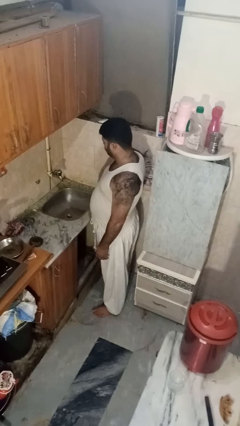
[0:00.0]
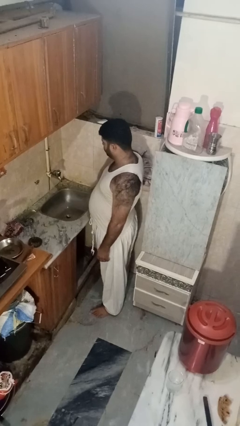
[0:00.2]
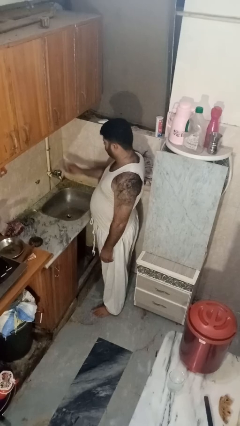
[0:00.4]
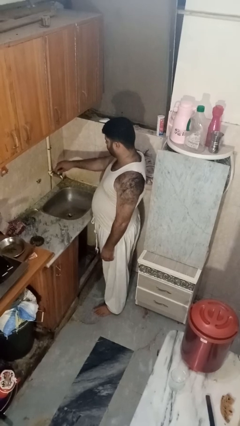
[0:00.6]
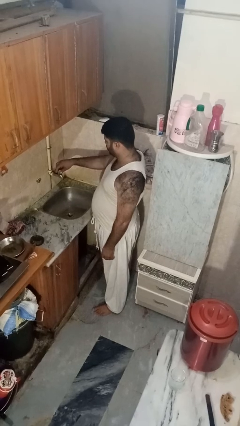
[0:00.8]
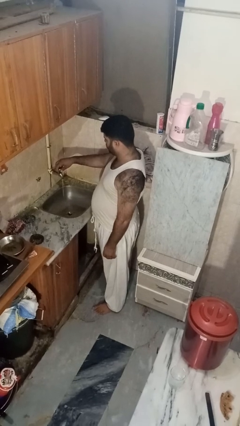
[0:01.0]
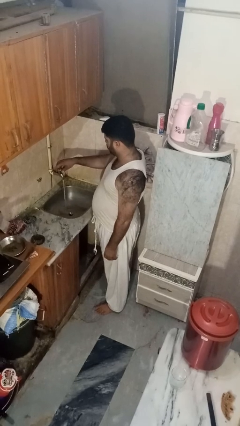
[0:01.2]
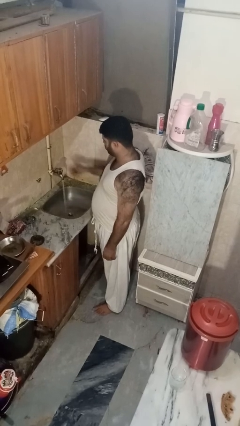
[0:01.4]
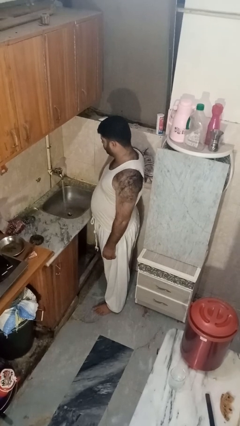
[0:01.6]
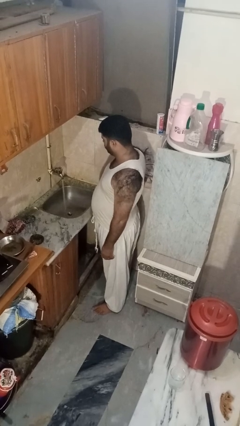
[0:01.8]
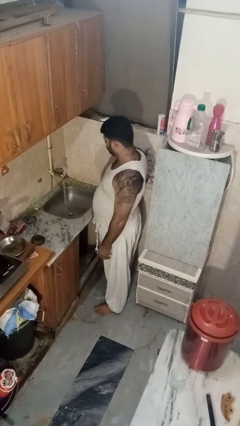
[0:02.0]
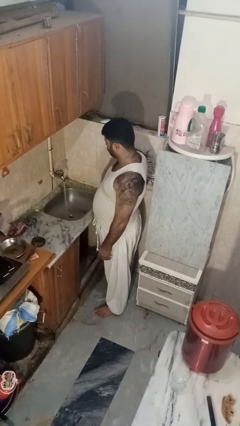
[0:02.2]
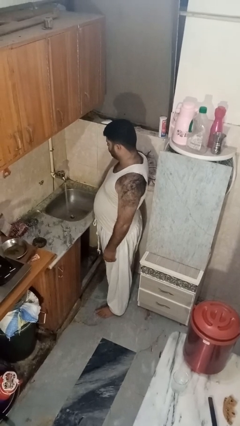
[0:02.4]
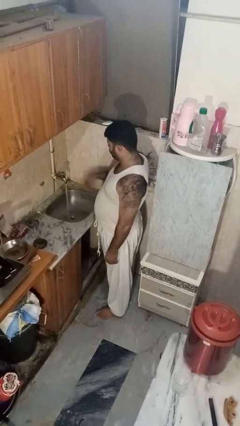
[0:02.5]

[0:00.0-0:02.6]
person turns on faucet

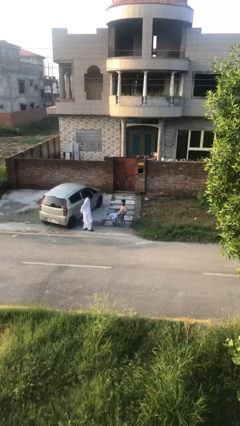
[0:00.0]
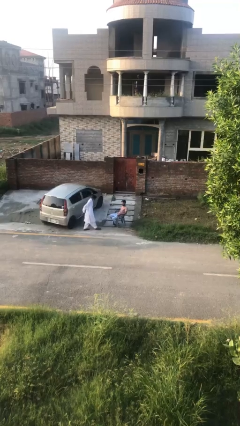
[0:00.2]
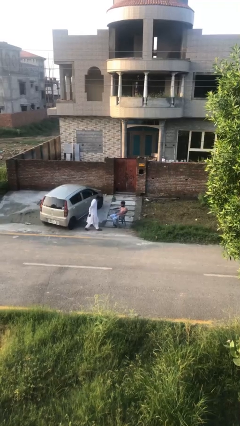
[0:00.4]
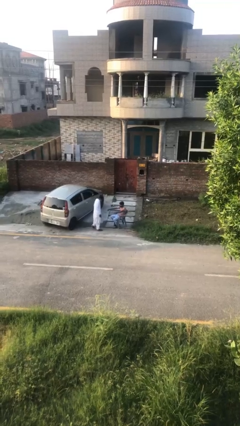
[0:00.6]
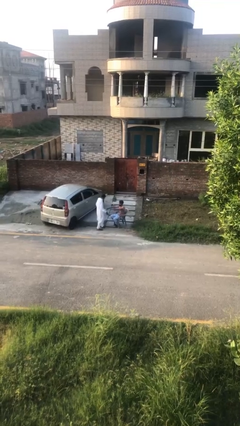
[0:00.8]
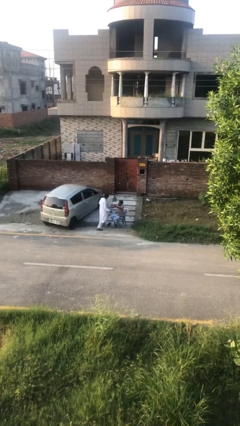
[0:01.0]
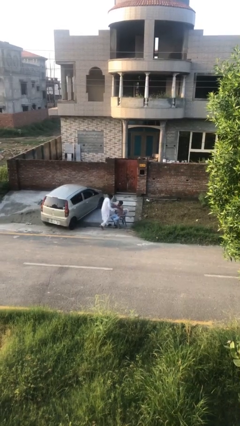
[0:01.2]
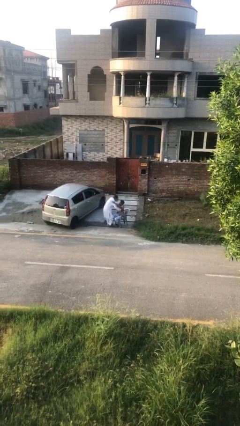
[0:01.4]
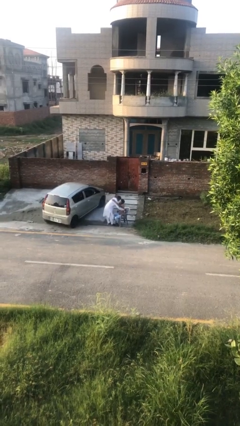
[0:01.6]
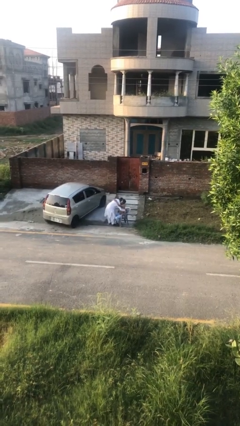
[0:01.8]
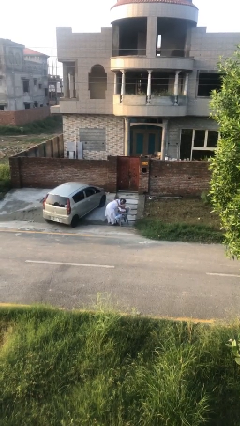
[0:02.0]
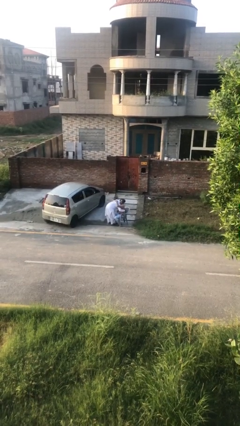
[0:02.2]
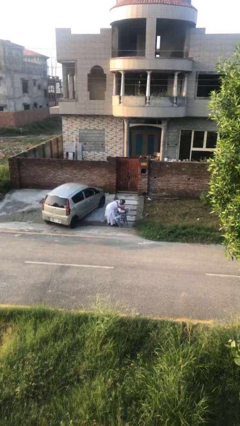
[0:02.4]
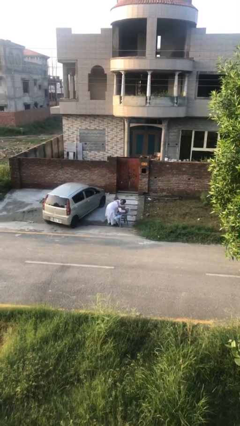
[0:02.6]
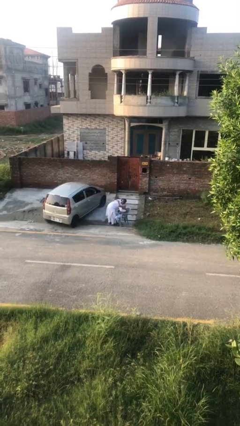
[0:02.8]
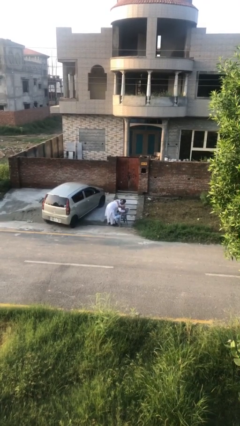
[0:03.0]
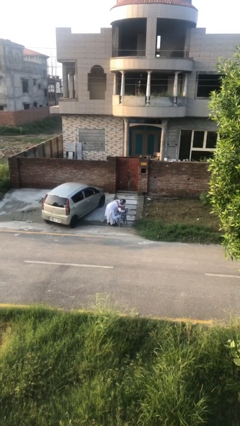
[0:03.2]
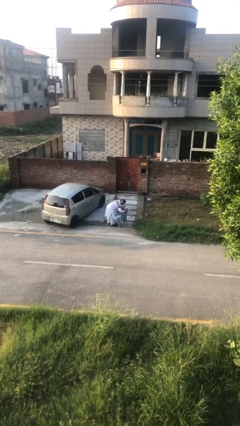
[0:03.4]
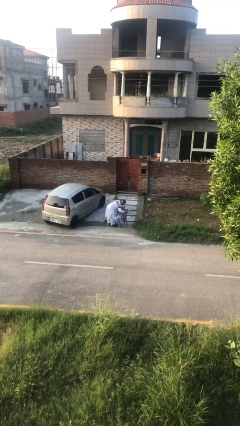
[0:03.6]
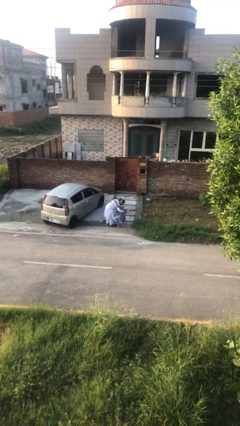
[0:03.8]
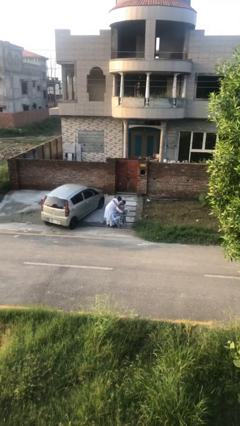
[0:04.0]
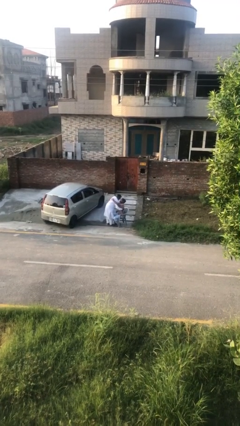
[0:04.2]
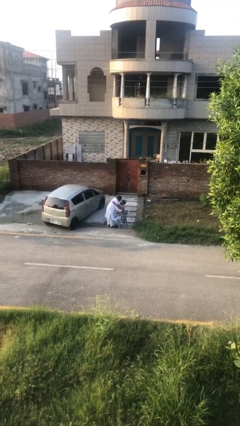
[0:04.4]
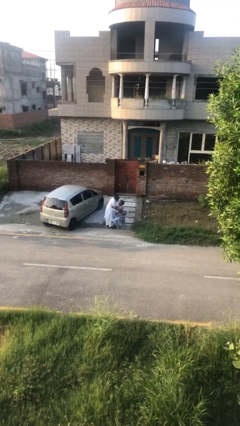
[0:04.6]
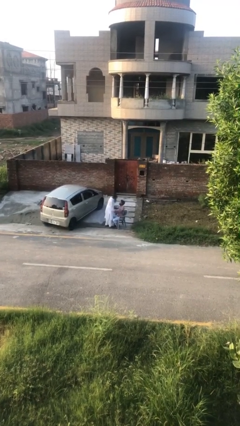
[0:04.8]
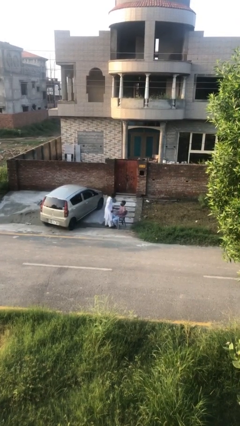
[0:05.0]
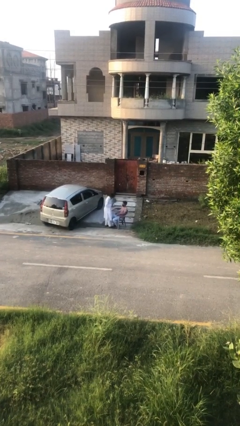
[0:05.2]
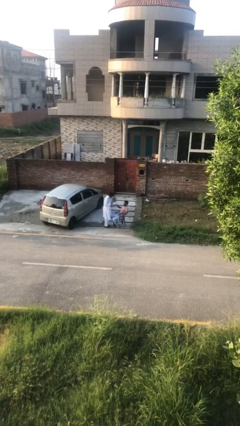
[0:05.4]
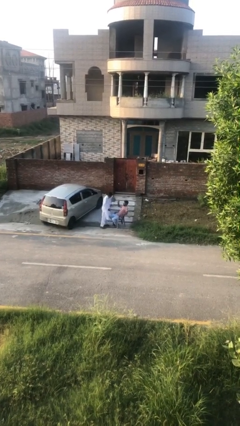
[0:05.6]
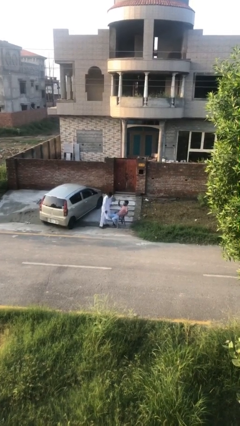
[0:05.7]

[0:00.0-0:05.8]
person embraces person

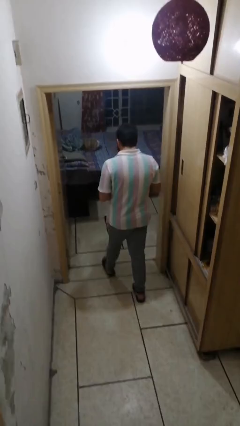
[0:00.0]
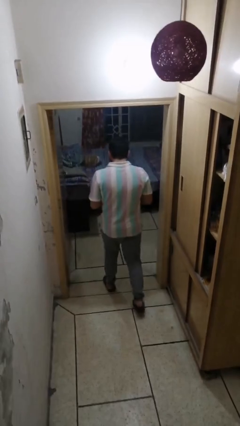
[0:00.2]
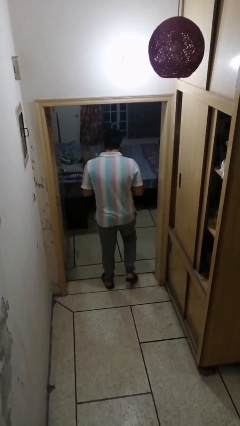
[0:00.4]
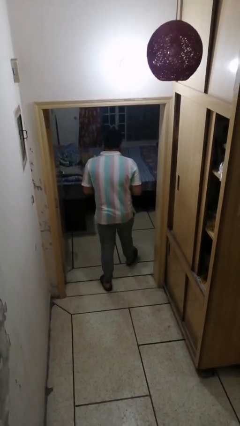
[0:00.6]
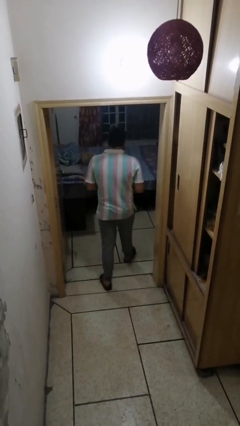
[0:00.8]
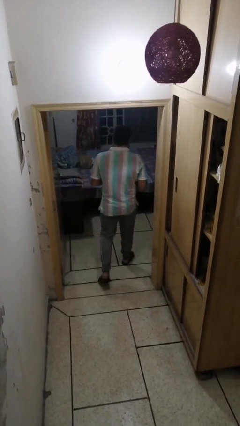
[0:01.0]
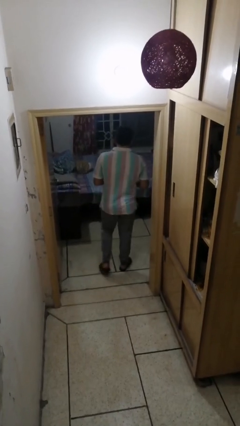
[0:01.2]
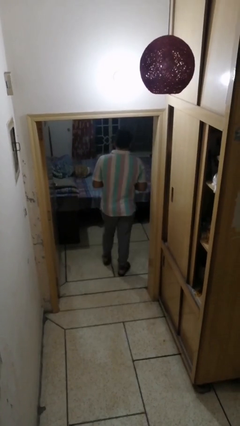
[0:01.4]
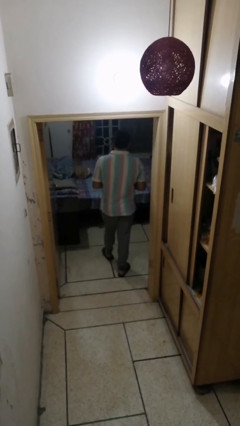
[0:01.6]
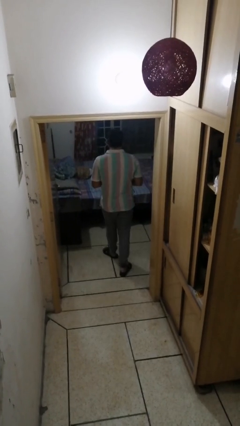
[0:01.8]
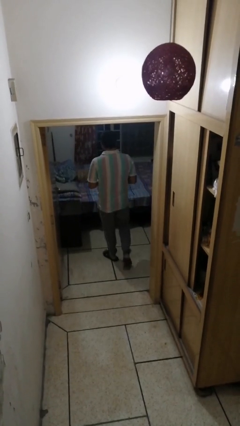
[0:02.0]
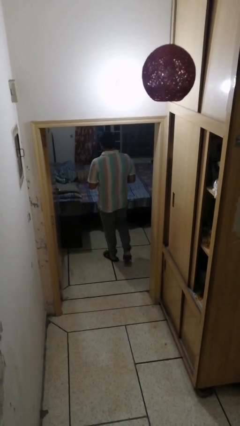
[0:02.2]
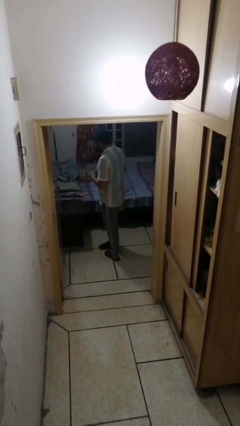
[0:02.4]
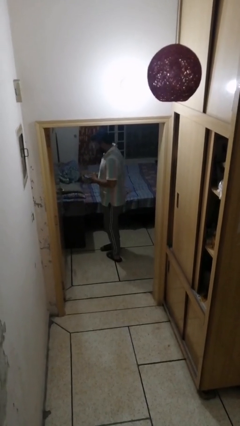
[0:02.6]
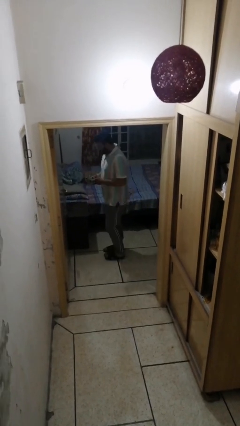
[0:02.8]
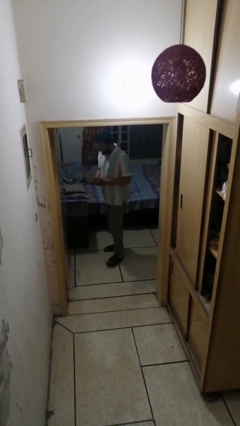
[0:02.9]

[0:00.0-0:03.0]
person exits scene through structure

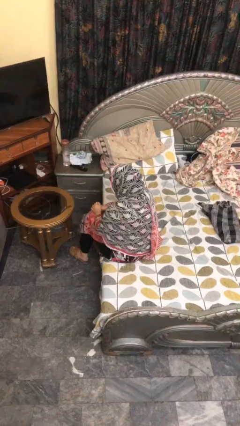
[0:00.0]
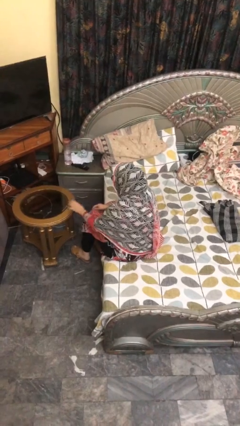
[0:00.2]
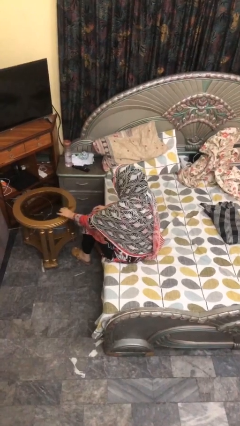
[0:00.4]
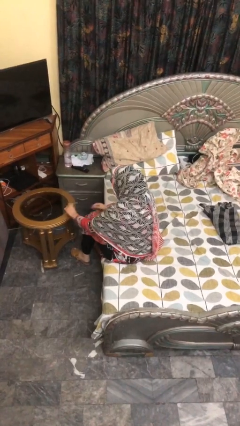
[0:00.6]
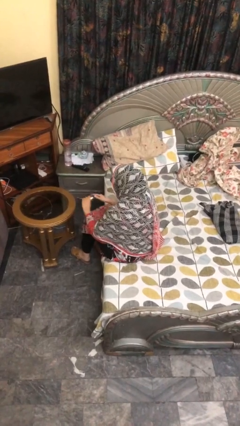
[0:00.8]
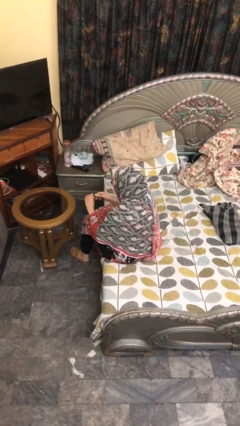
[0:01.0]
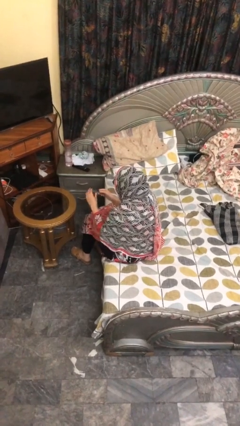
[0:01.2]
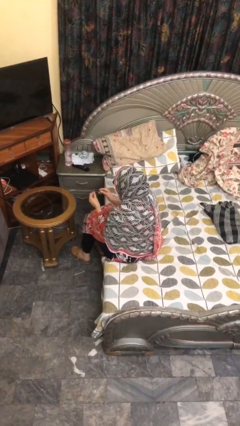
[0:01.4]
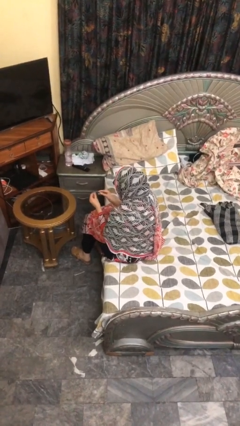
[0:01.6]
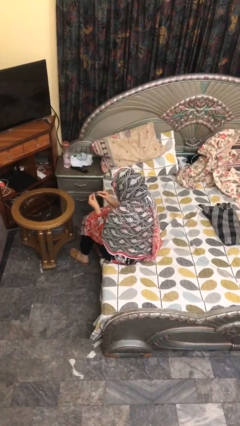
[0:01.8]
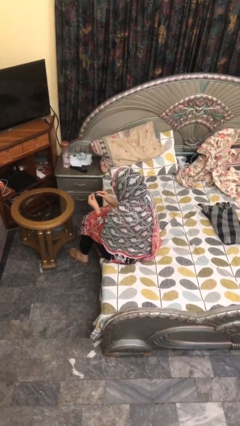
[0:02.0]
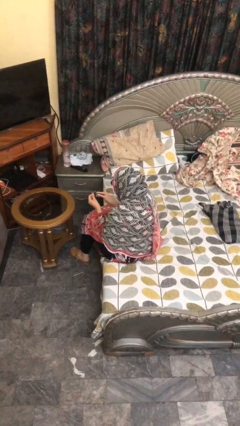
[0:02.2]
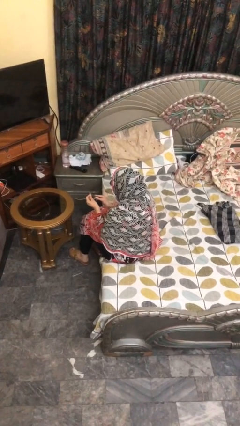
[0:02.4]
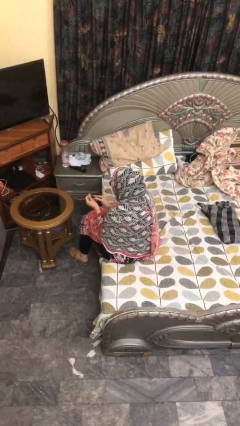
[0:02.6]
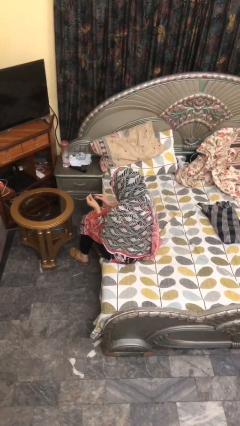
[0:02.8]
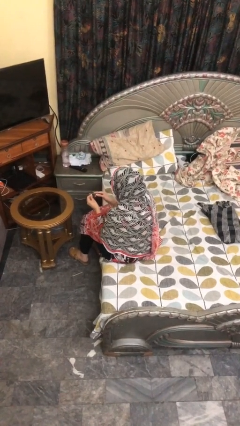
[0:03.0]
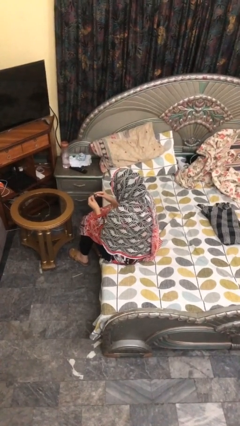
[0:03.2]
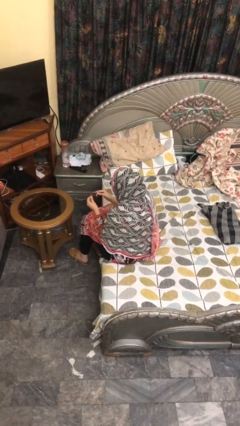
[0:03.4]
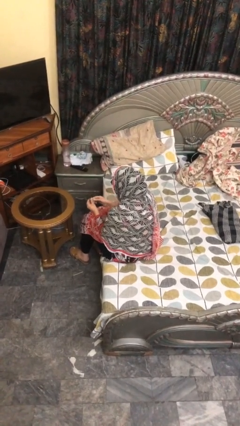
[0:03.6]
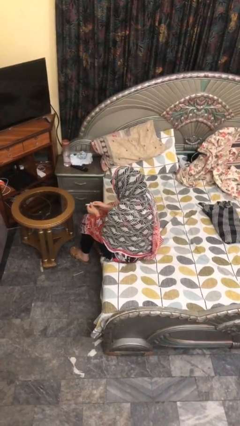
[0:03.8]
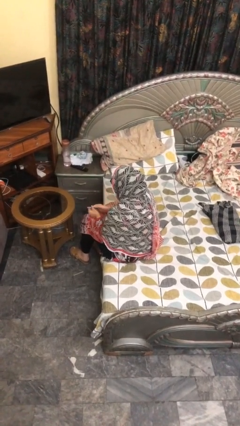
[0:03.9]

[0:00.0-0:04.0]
person files fingernails

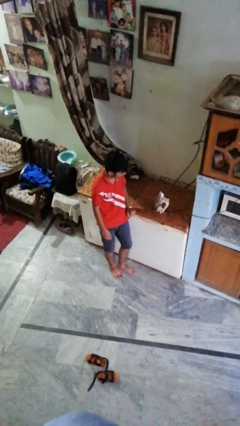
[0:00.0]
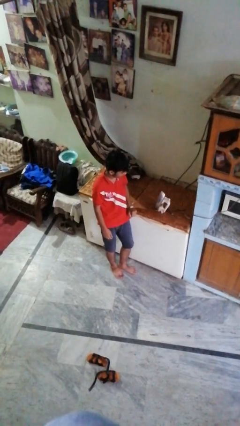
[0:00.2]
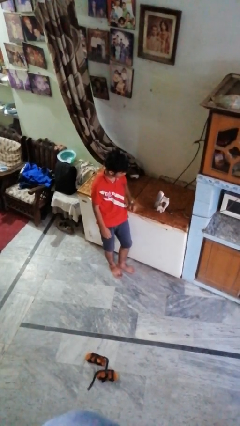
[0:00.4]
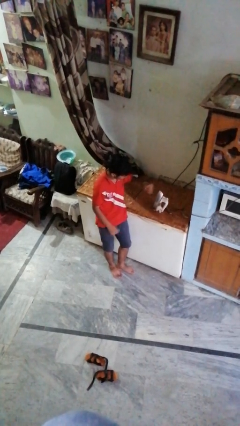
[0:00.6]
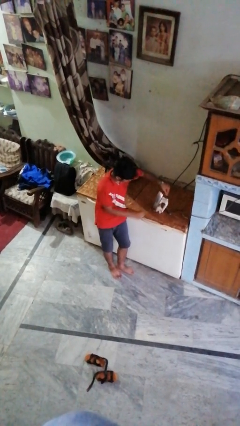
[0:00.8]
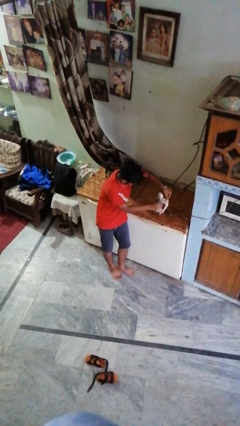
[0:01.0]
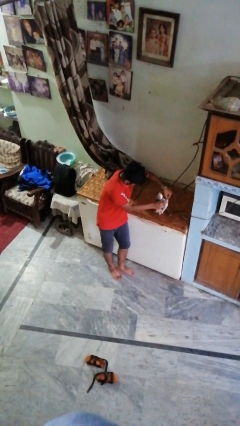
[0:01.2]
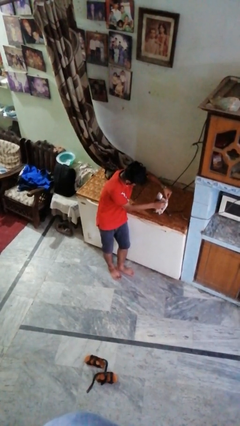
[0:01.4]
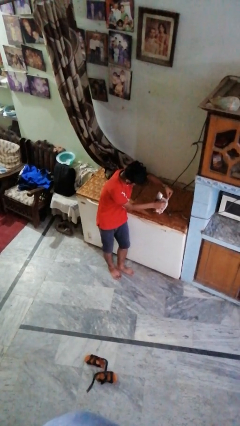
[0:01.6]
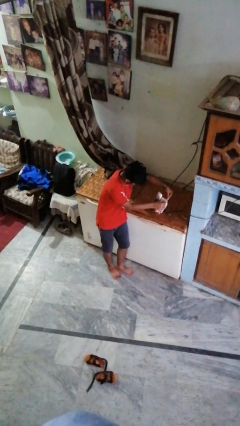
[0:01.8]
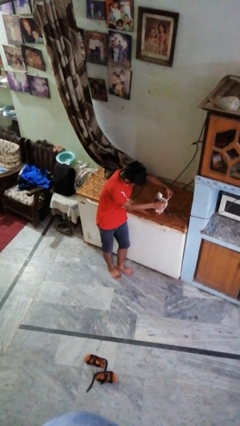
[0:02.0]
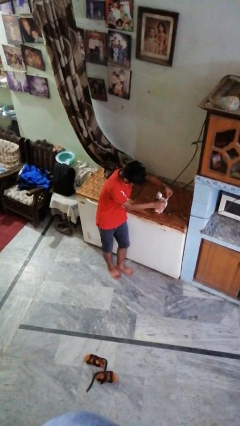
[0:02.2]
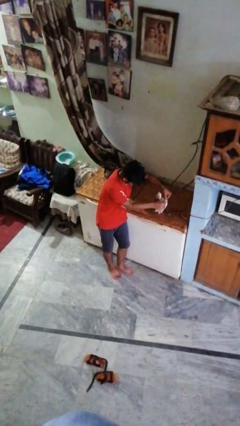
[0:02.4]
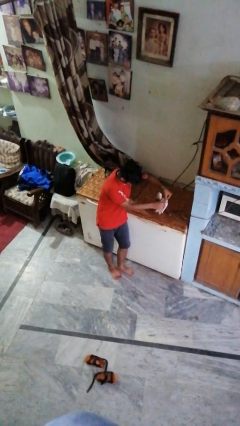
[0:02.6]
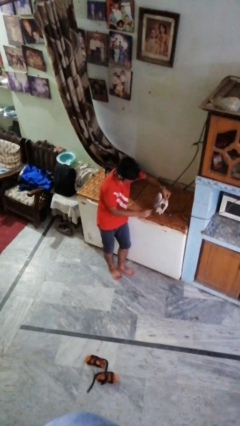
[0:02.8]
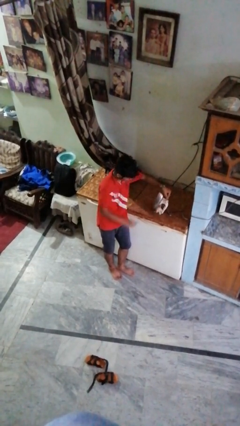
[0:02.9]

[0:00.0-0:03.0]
person adjusts thermostat
